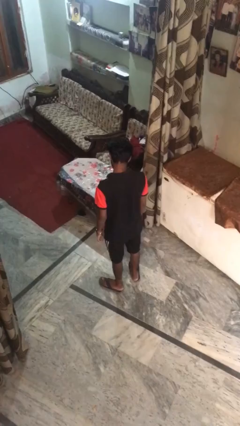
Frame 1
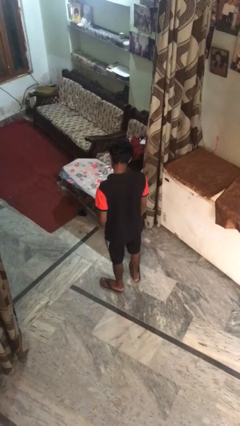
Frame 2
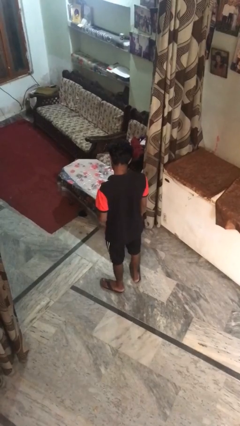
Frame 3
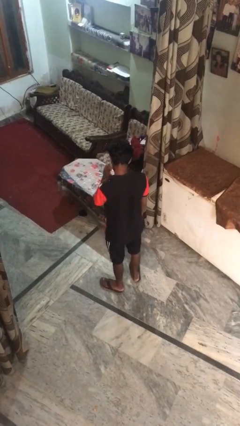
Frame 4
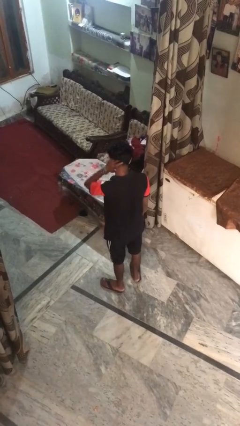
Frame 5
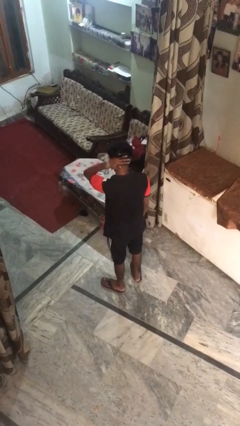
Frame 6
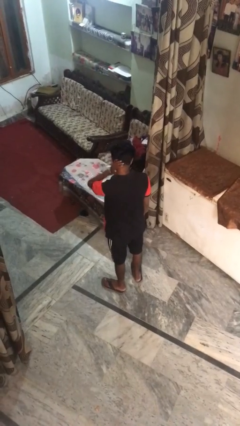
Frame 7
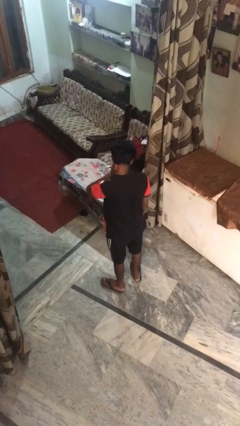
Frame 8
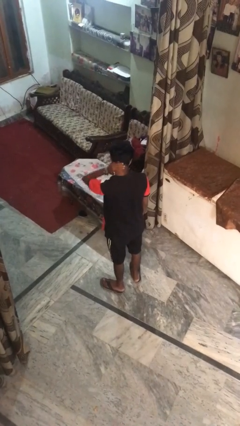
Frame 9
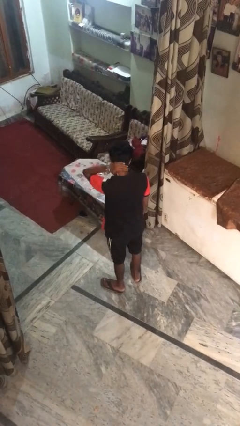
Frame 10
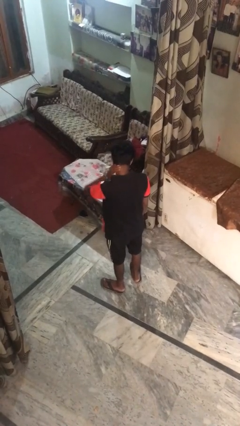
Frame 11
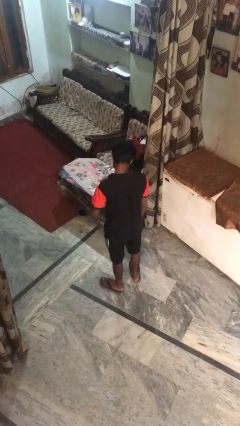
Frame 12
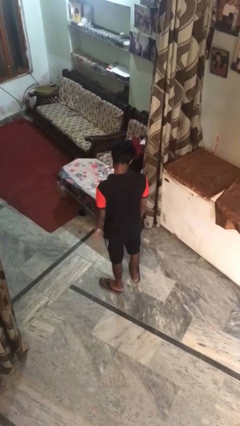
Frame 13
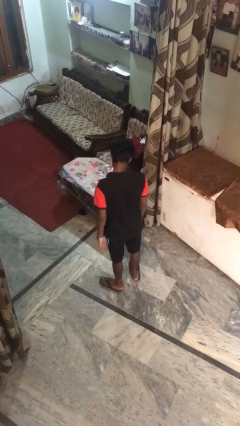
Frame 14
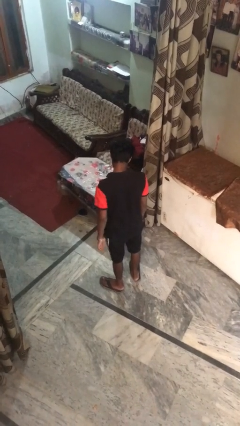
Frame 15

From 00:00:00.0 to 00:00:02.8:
person rubs neck

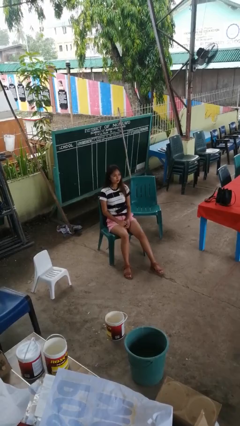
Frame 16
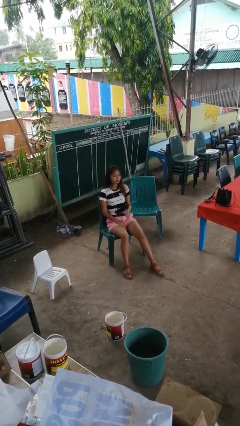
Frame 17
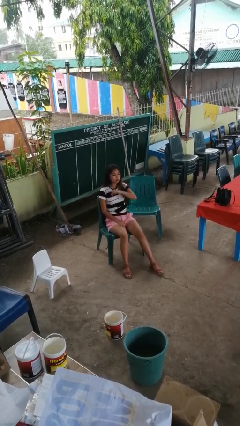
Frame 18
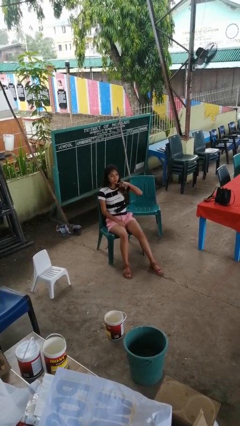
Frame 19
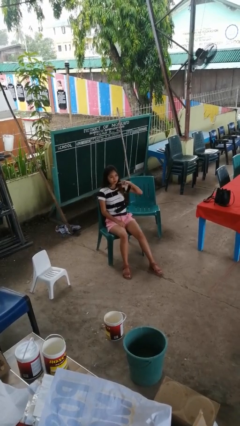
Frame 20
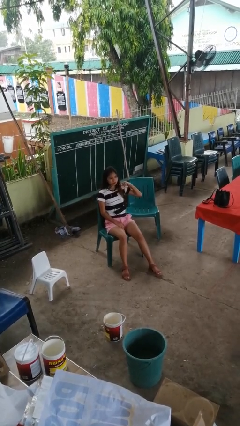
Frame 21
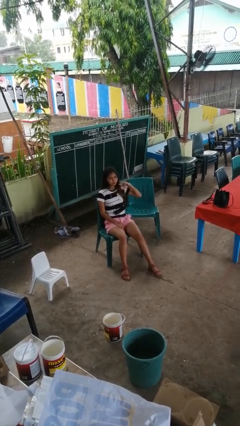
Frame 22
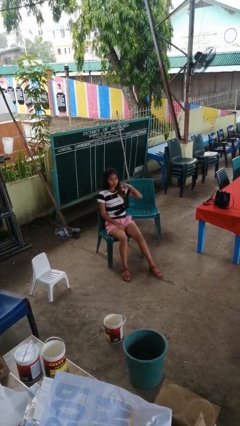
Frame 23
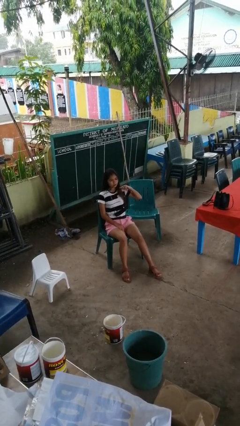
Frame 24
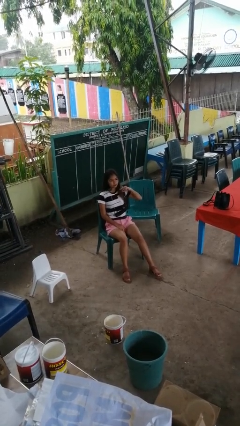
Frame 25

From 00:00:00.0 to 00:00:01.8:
person gestures cut

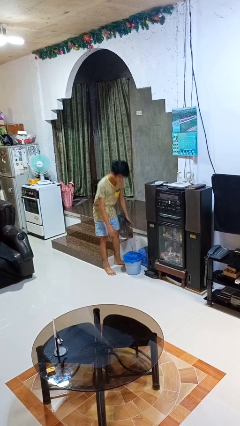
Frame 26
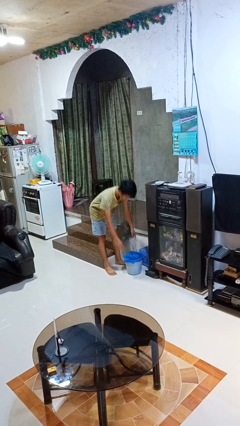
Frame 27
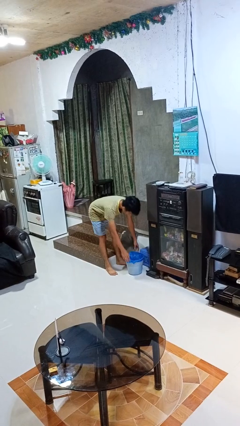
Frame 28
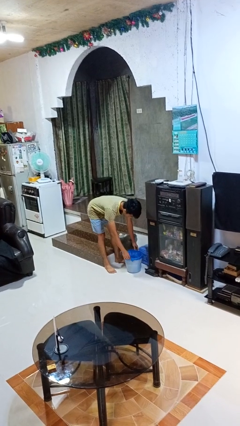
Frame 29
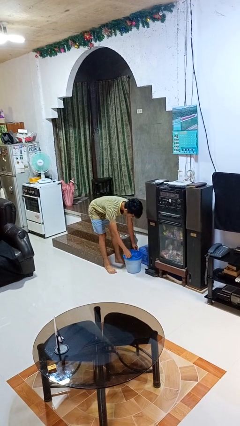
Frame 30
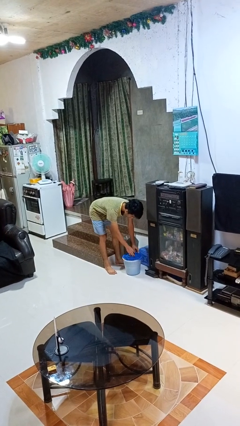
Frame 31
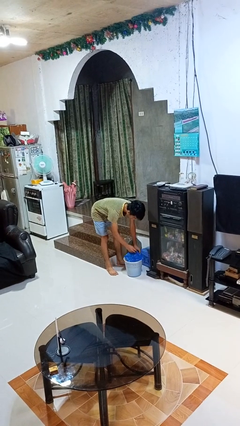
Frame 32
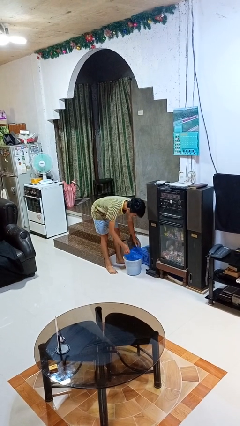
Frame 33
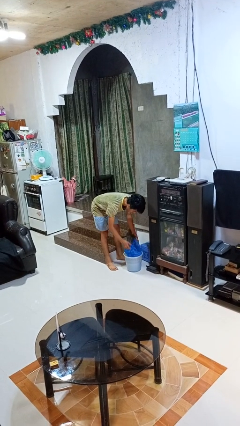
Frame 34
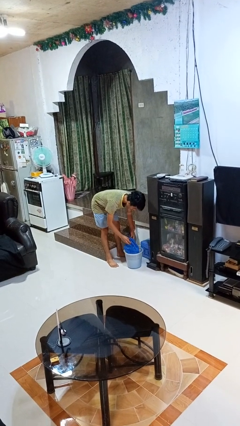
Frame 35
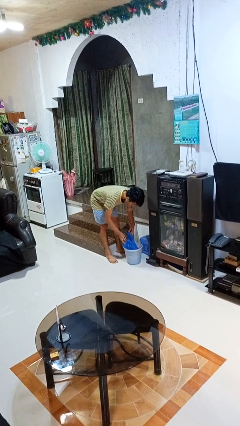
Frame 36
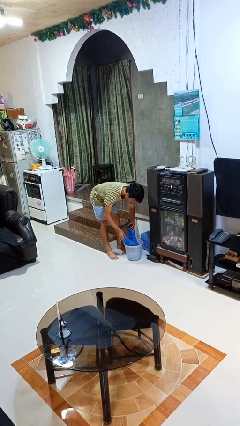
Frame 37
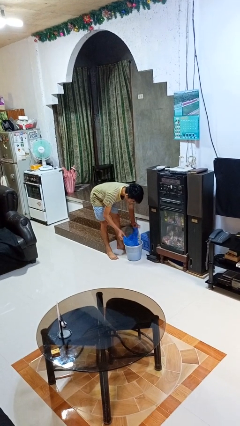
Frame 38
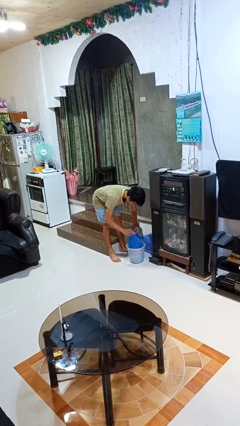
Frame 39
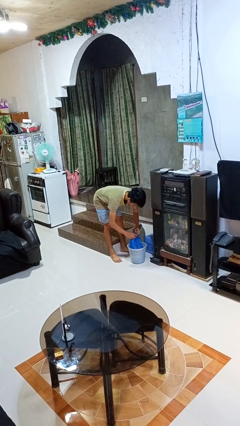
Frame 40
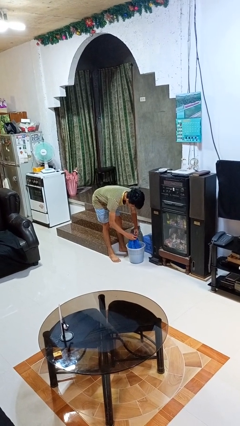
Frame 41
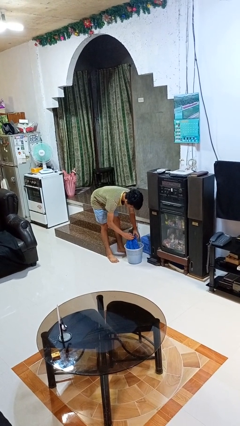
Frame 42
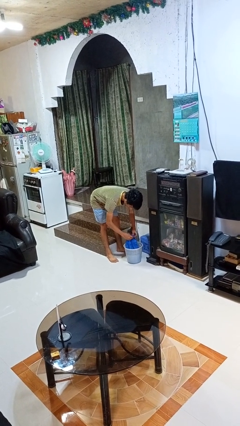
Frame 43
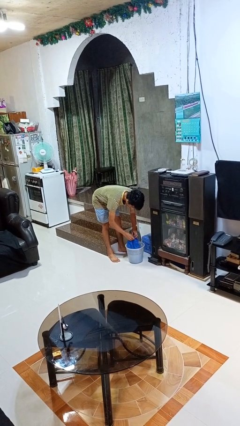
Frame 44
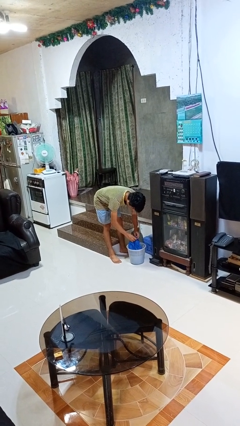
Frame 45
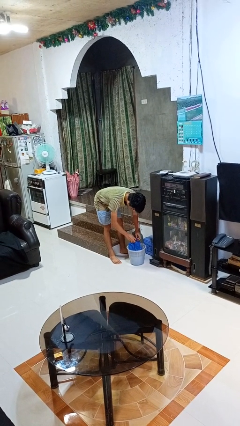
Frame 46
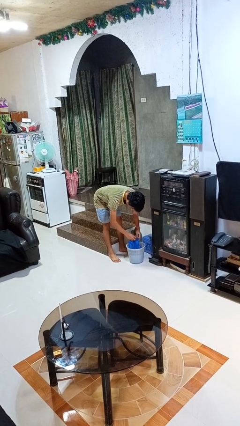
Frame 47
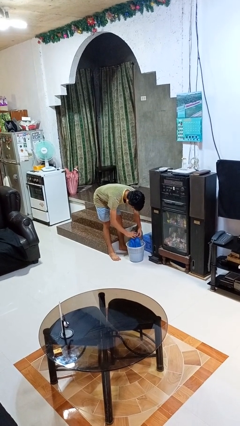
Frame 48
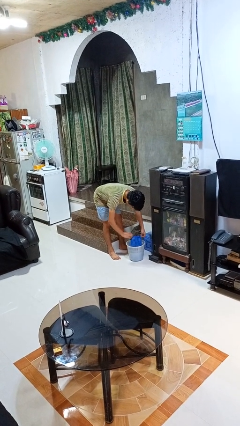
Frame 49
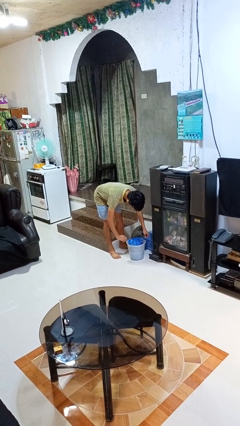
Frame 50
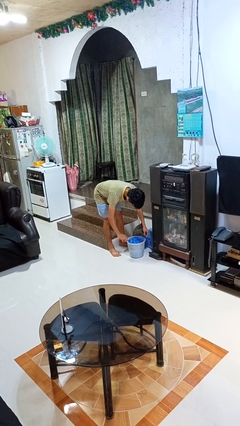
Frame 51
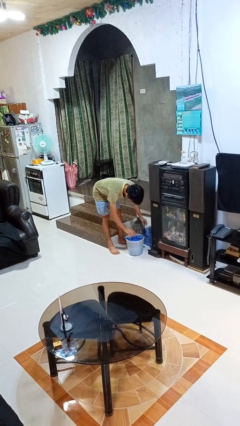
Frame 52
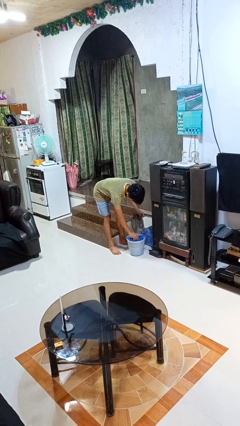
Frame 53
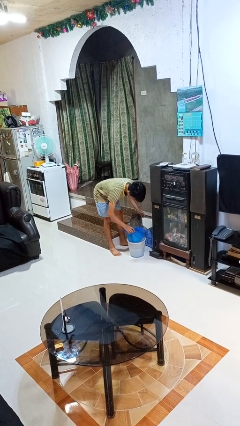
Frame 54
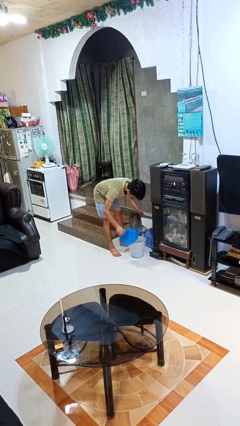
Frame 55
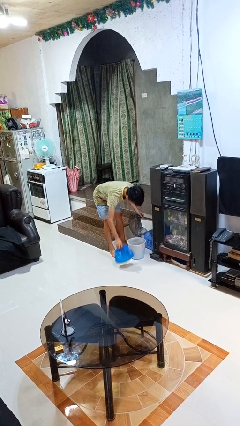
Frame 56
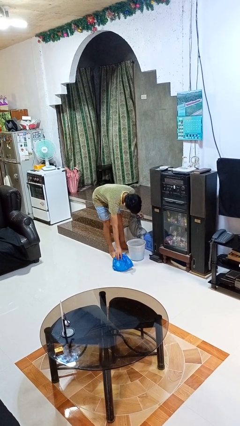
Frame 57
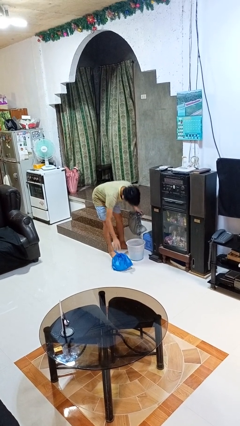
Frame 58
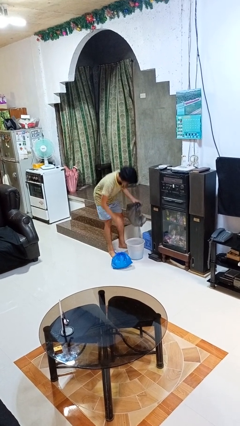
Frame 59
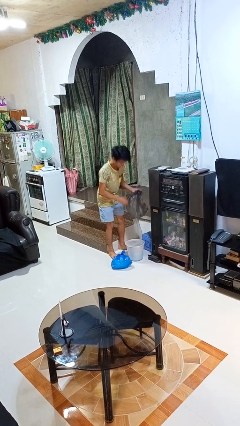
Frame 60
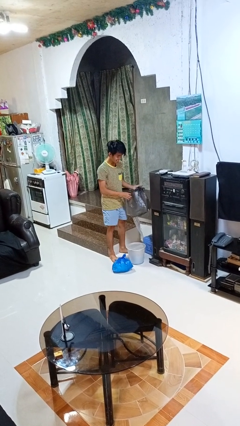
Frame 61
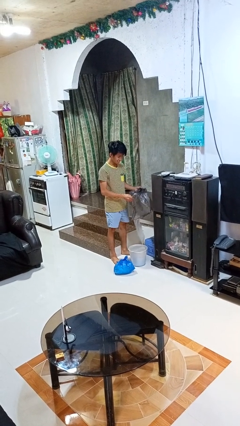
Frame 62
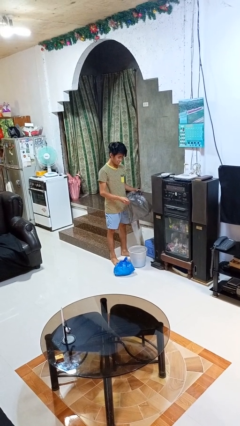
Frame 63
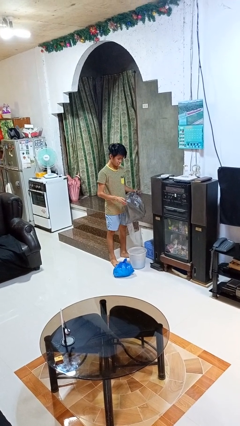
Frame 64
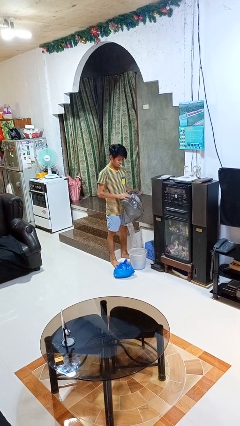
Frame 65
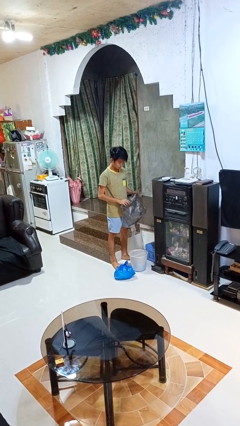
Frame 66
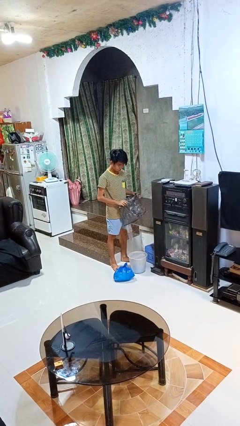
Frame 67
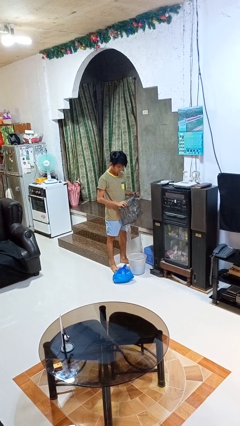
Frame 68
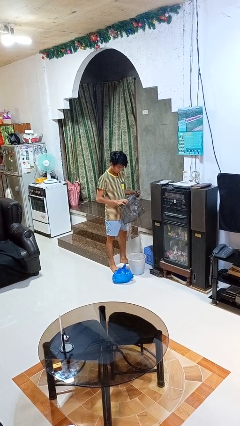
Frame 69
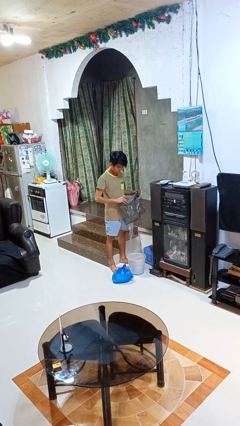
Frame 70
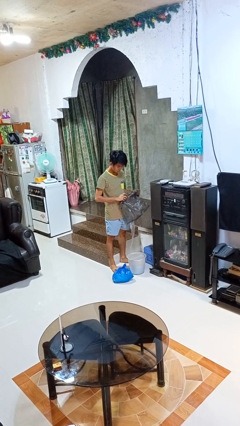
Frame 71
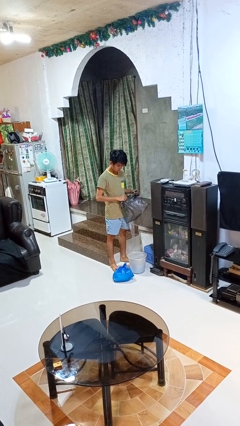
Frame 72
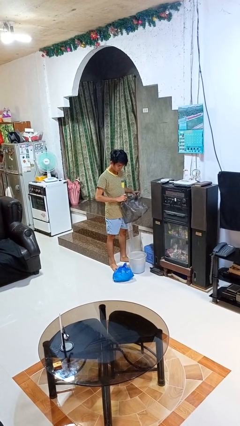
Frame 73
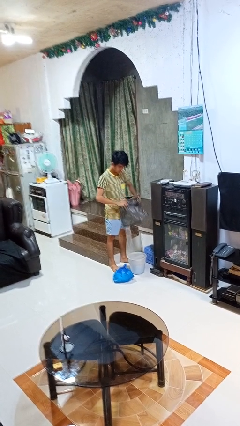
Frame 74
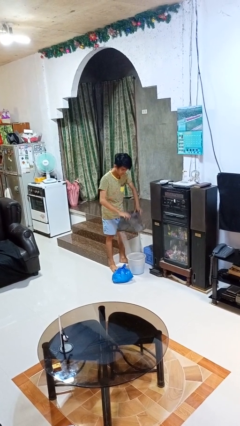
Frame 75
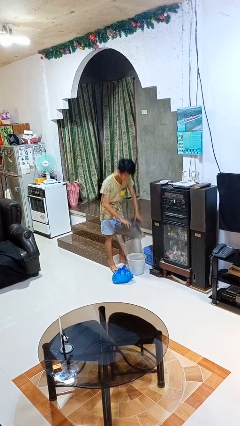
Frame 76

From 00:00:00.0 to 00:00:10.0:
person removes trashbag from trashcan

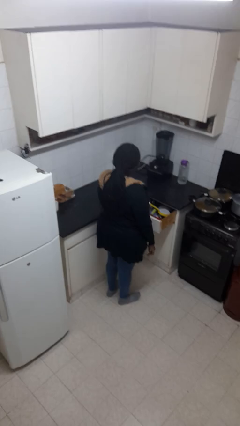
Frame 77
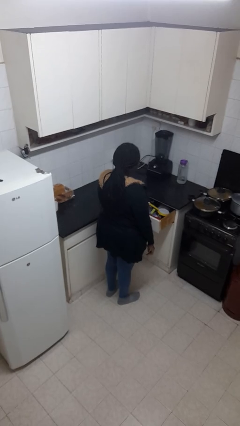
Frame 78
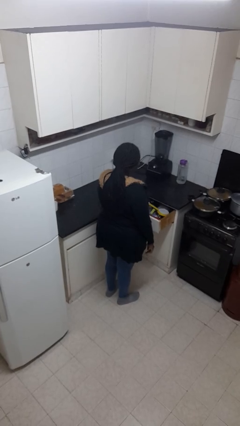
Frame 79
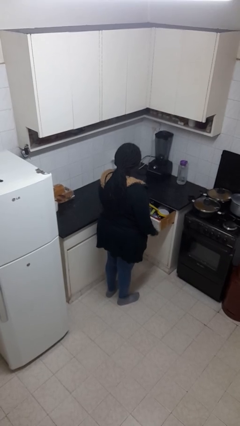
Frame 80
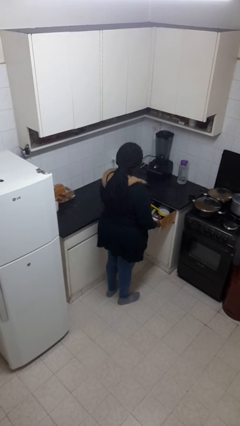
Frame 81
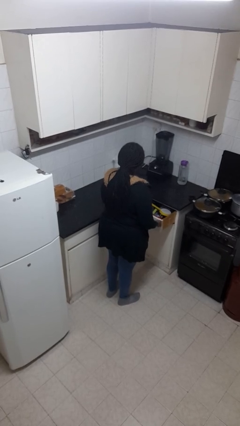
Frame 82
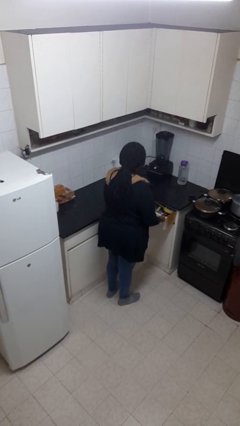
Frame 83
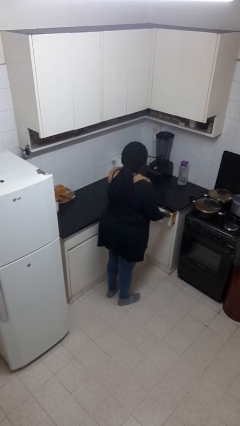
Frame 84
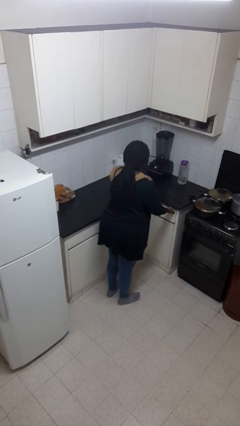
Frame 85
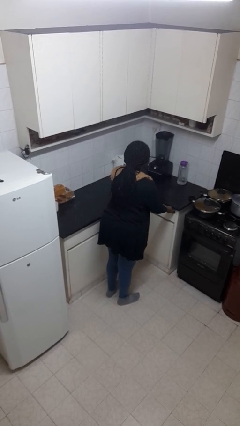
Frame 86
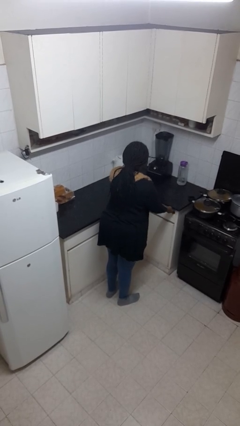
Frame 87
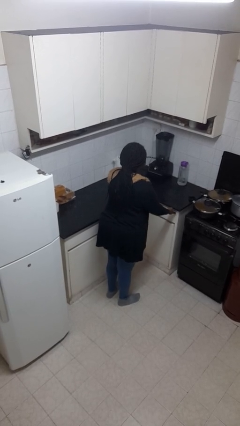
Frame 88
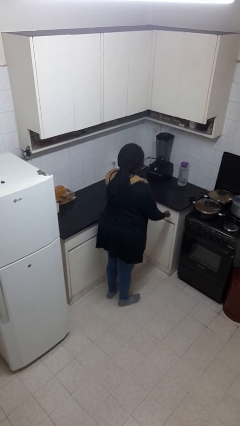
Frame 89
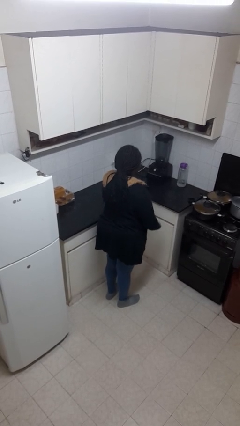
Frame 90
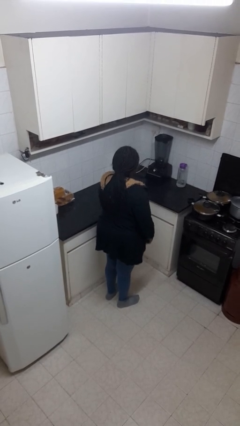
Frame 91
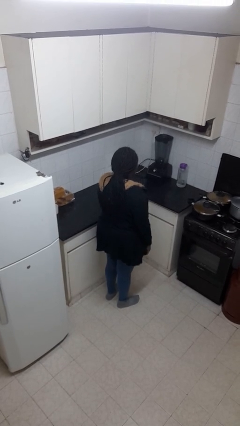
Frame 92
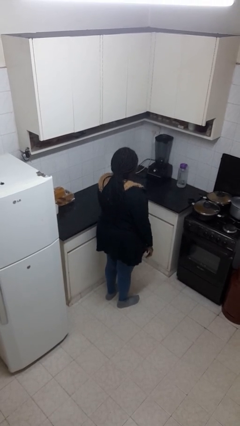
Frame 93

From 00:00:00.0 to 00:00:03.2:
person closes kitchen drawer
